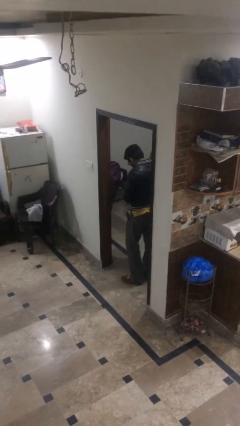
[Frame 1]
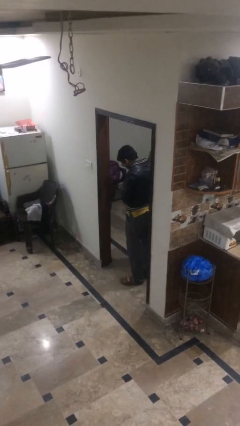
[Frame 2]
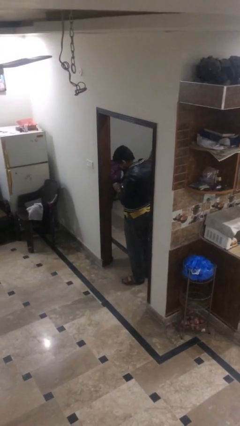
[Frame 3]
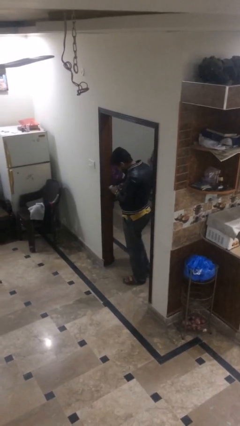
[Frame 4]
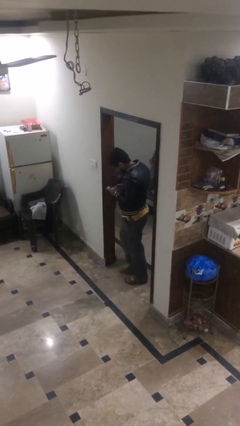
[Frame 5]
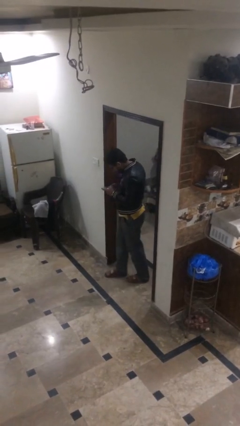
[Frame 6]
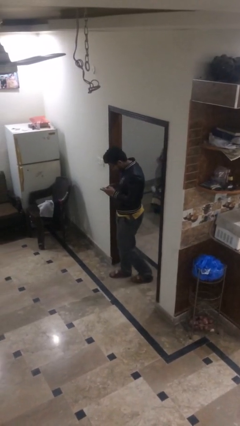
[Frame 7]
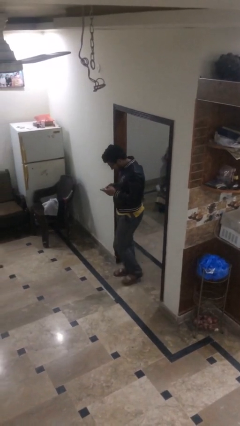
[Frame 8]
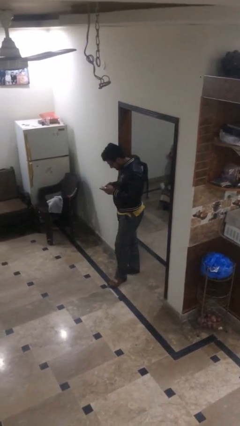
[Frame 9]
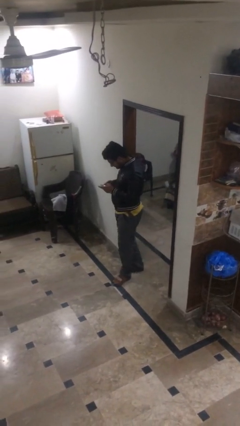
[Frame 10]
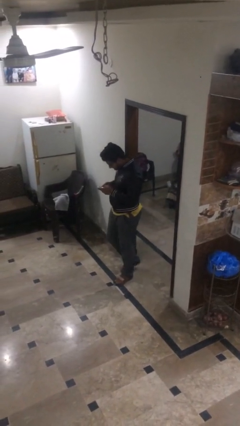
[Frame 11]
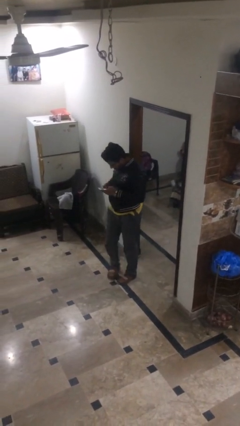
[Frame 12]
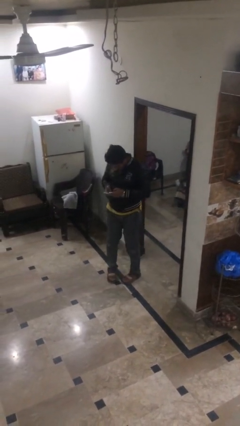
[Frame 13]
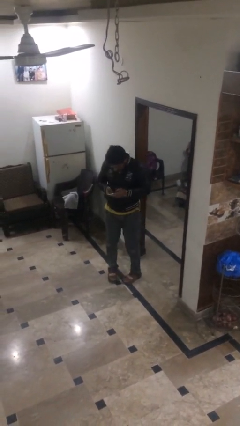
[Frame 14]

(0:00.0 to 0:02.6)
person exits scene through structure

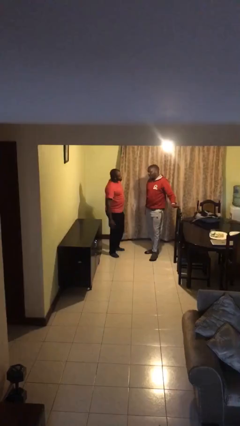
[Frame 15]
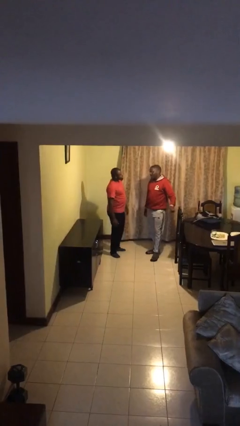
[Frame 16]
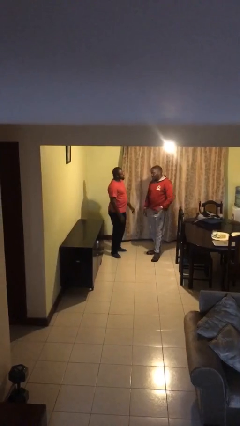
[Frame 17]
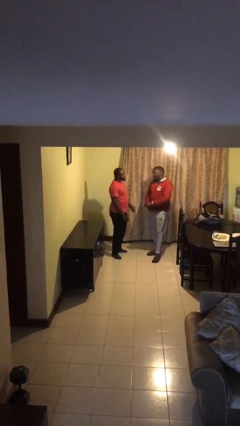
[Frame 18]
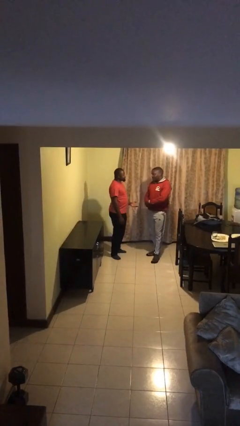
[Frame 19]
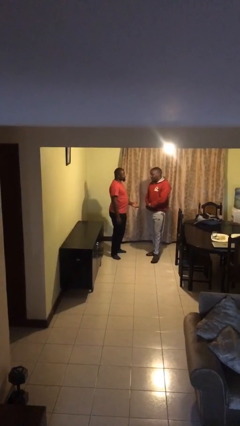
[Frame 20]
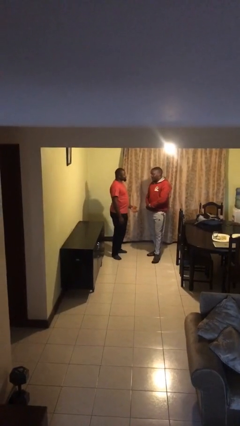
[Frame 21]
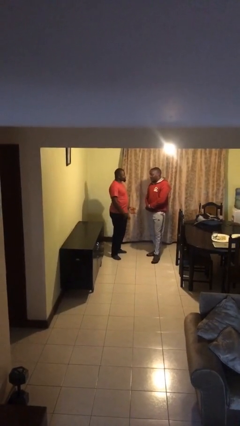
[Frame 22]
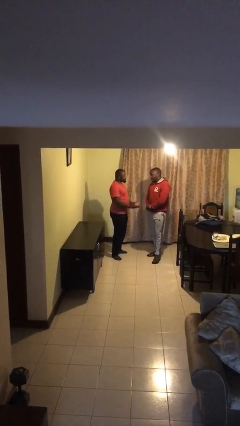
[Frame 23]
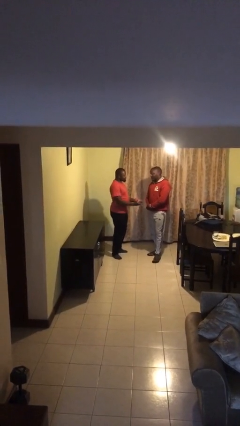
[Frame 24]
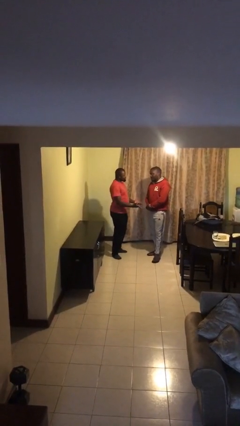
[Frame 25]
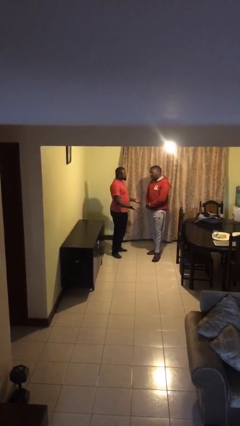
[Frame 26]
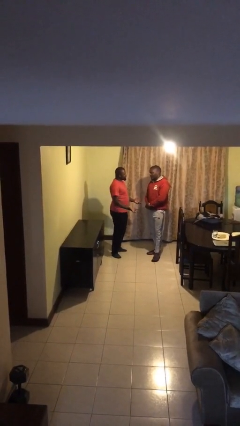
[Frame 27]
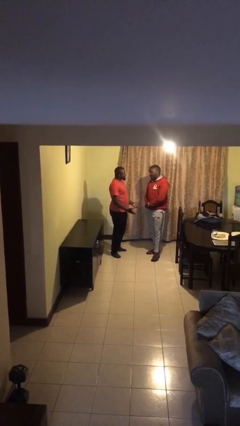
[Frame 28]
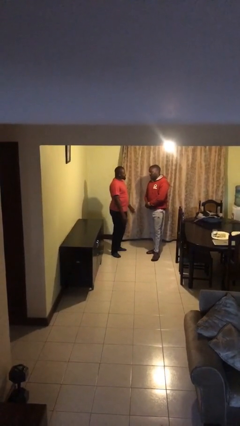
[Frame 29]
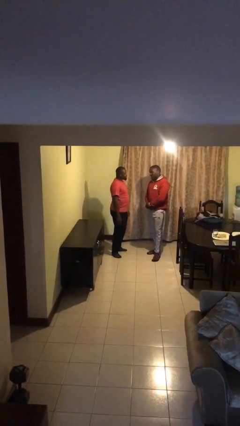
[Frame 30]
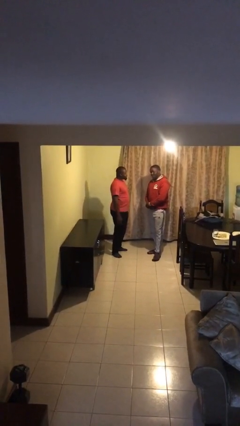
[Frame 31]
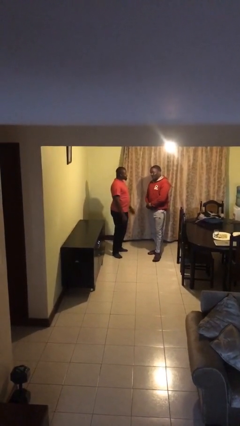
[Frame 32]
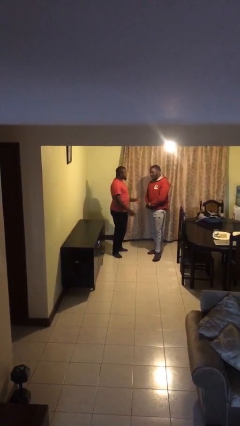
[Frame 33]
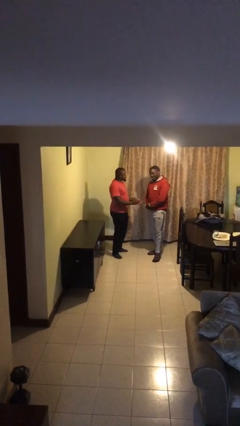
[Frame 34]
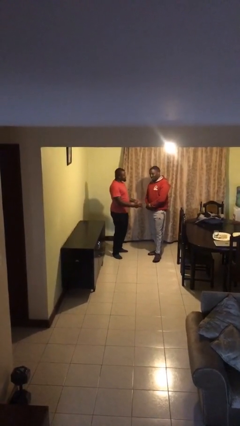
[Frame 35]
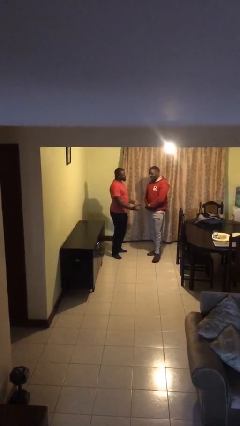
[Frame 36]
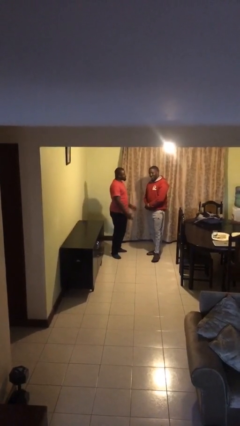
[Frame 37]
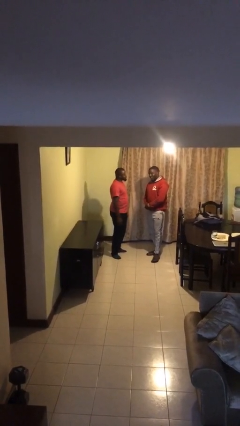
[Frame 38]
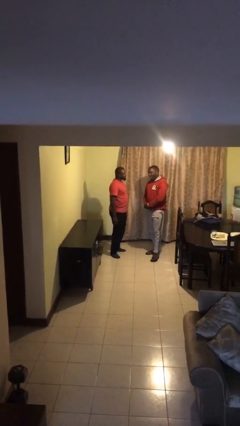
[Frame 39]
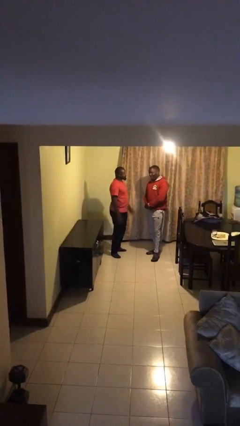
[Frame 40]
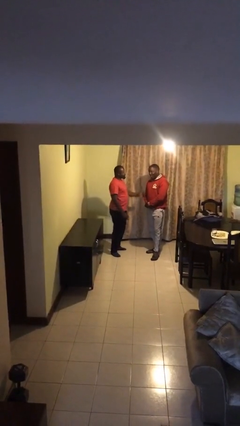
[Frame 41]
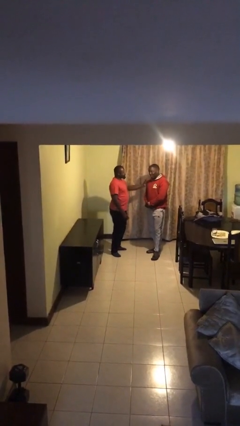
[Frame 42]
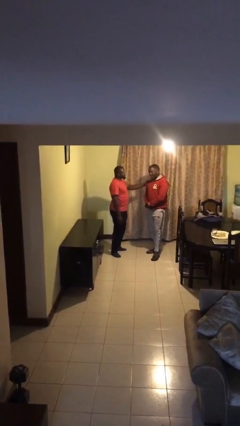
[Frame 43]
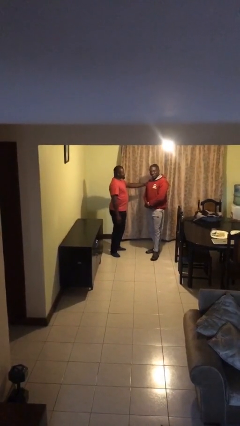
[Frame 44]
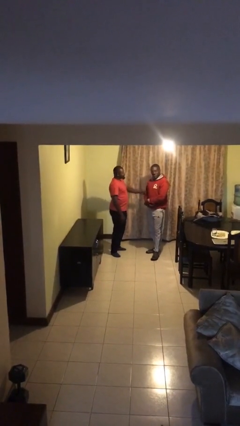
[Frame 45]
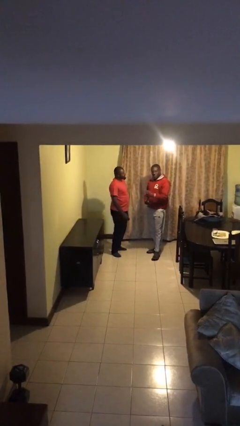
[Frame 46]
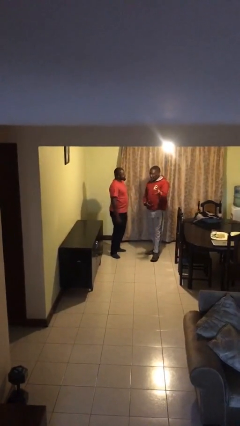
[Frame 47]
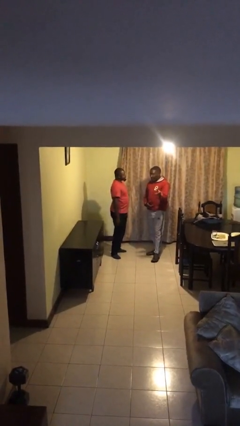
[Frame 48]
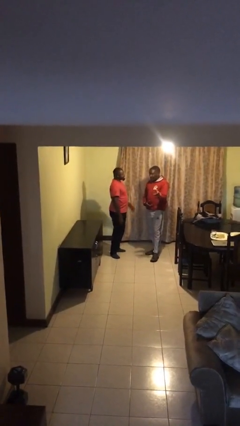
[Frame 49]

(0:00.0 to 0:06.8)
person talks to person

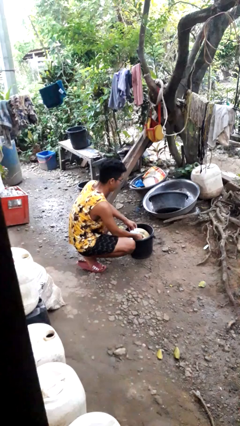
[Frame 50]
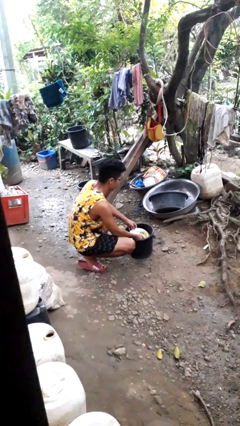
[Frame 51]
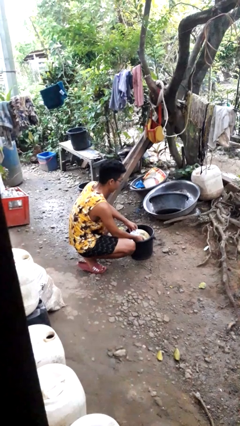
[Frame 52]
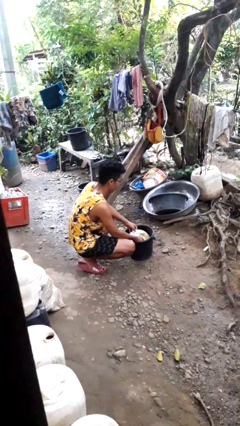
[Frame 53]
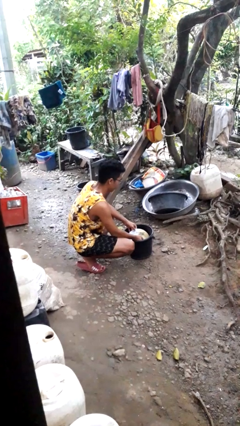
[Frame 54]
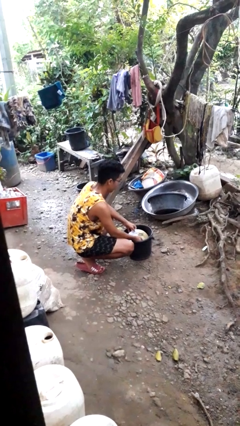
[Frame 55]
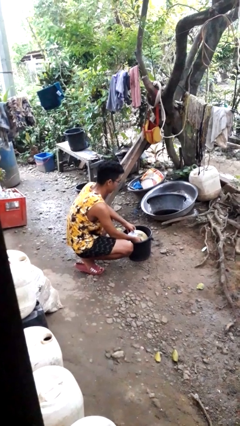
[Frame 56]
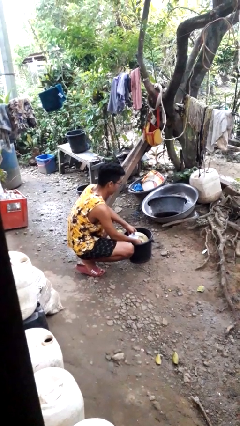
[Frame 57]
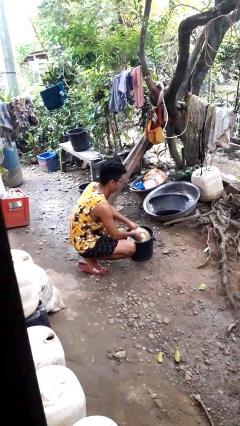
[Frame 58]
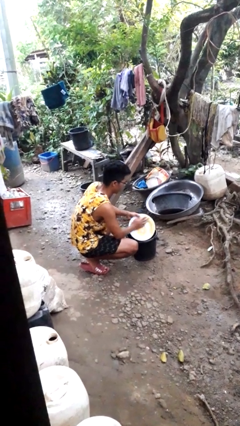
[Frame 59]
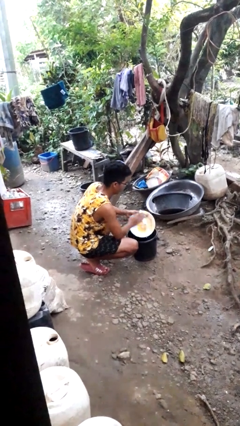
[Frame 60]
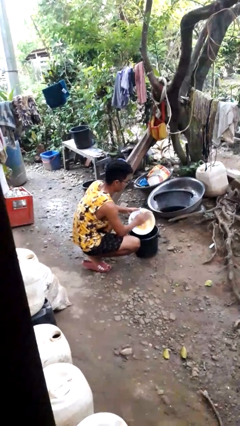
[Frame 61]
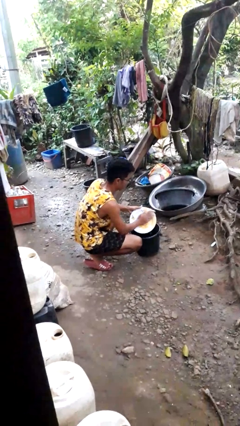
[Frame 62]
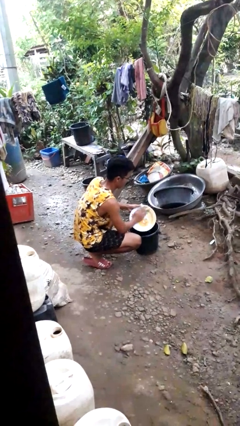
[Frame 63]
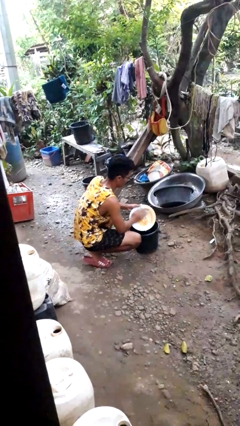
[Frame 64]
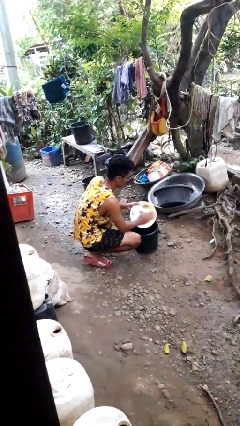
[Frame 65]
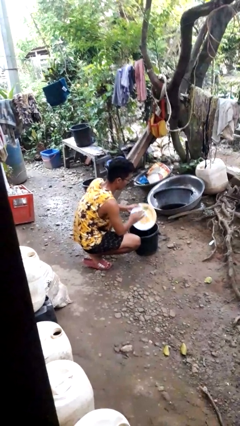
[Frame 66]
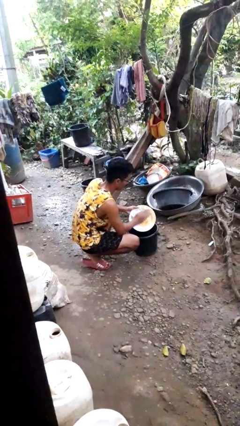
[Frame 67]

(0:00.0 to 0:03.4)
person washes dish

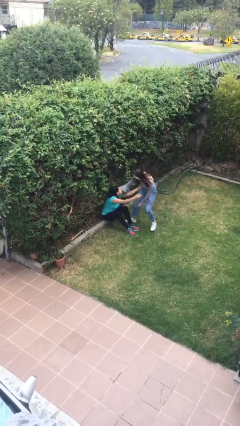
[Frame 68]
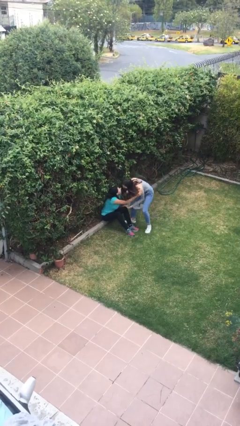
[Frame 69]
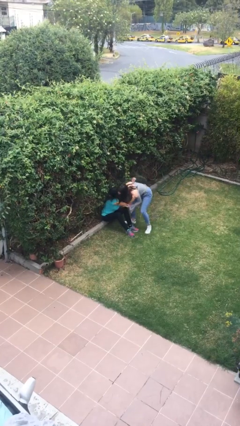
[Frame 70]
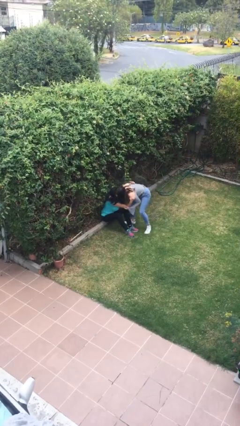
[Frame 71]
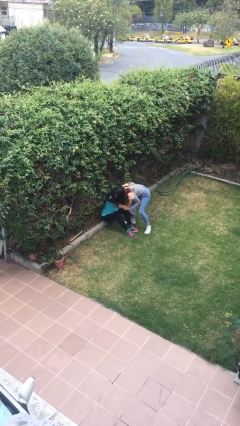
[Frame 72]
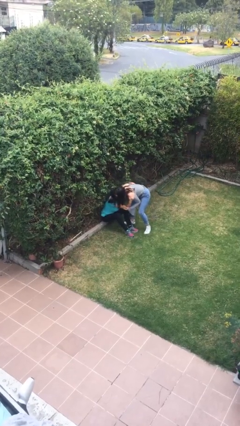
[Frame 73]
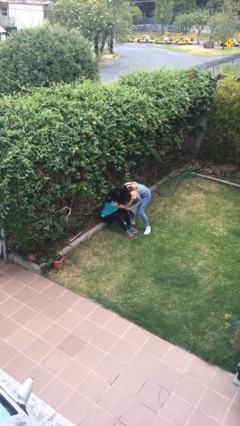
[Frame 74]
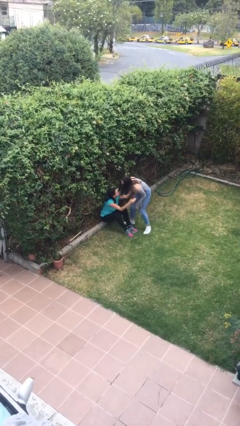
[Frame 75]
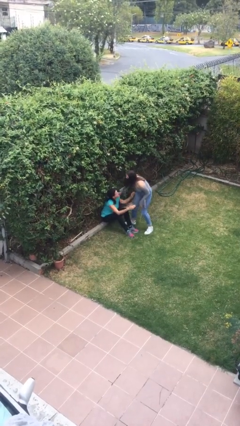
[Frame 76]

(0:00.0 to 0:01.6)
person embraces person

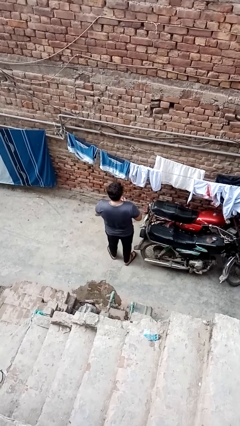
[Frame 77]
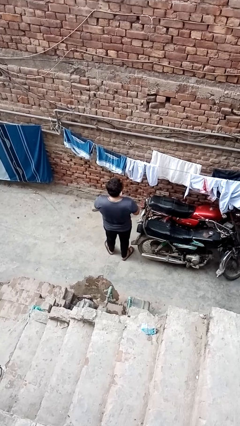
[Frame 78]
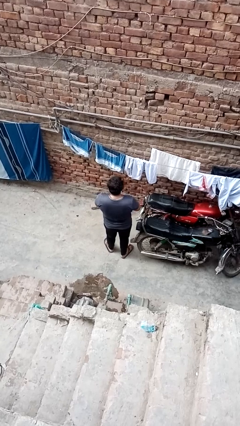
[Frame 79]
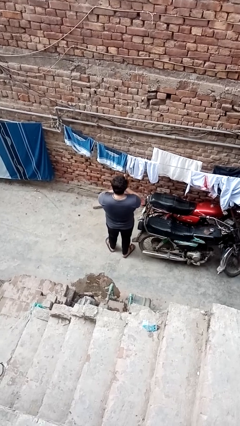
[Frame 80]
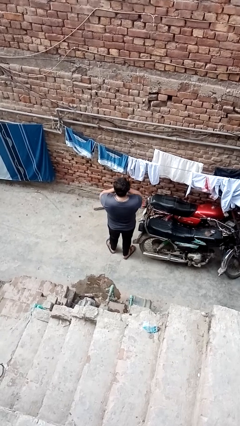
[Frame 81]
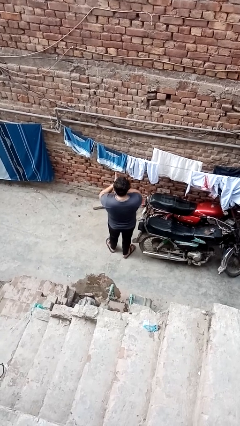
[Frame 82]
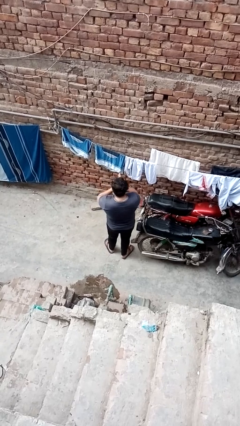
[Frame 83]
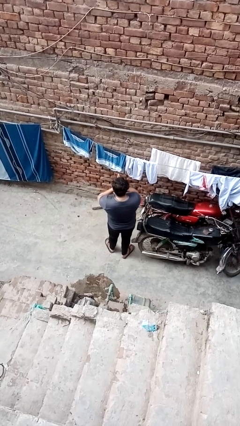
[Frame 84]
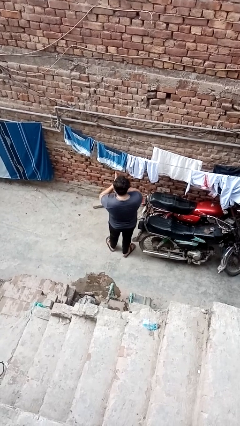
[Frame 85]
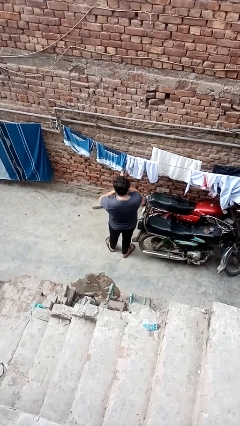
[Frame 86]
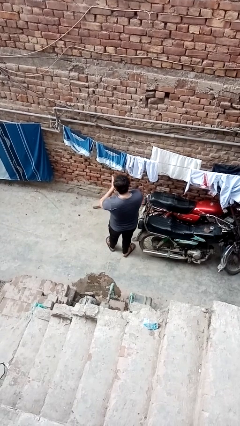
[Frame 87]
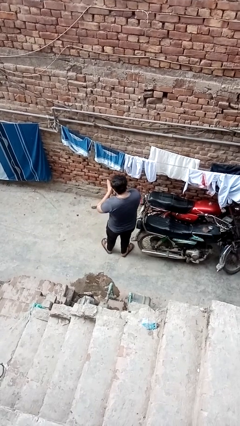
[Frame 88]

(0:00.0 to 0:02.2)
person blows into hands

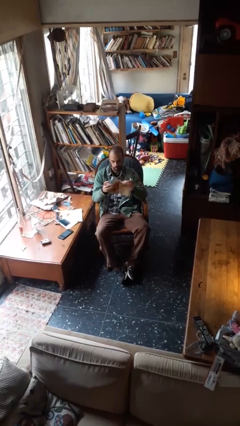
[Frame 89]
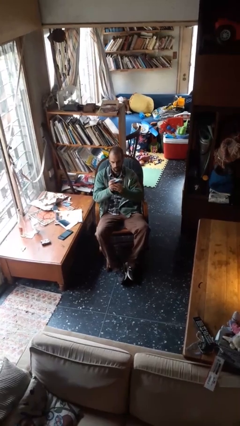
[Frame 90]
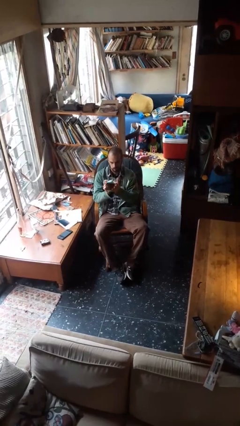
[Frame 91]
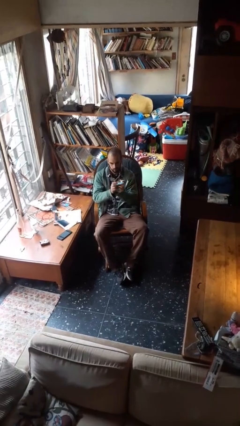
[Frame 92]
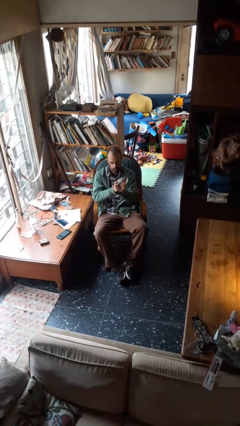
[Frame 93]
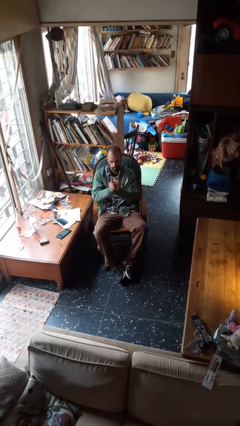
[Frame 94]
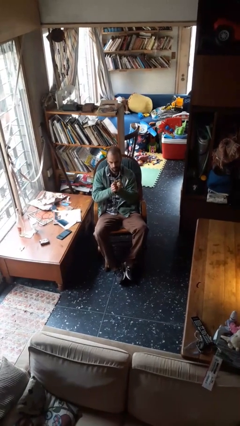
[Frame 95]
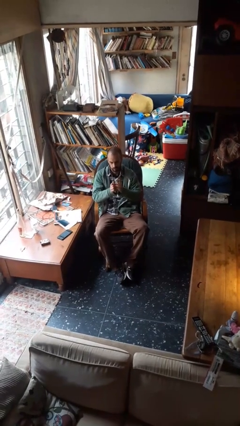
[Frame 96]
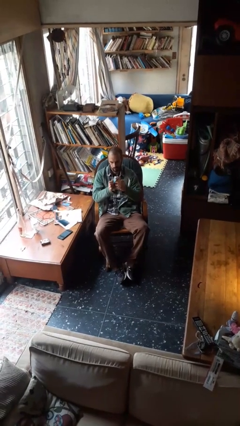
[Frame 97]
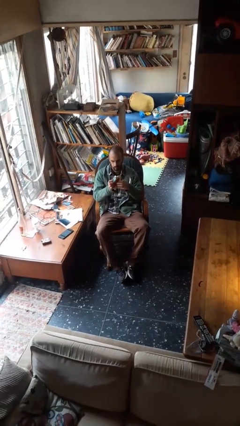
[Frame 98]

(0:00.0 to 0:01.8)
person crumples paper
